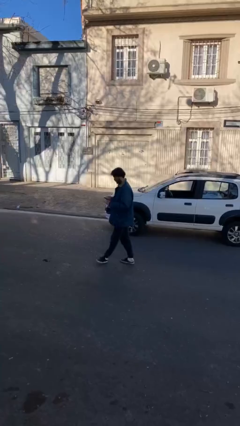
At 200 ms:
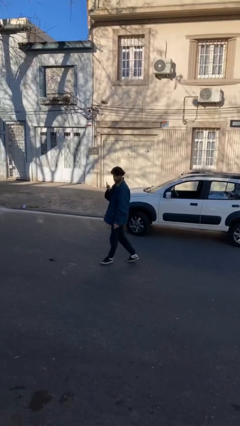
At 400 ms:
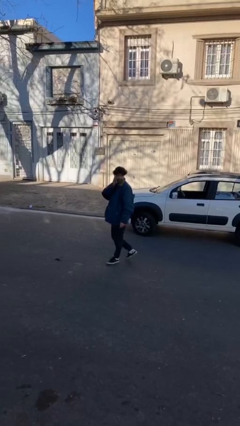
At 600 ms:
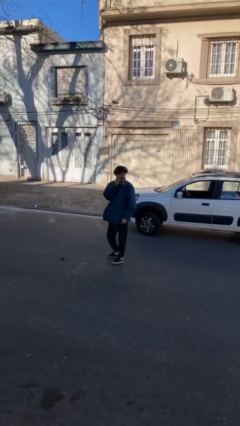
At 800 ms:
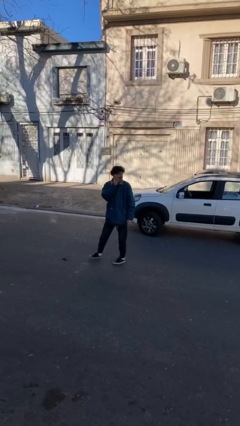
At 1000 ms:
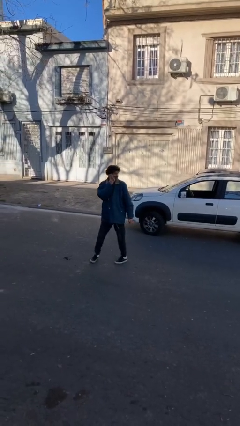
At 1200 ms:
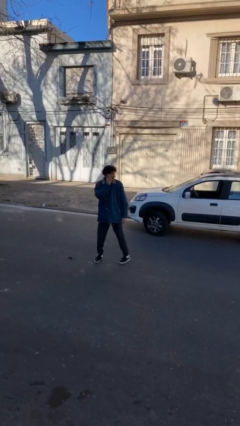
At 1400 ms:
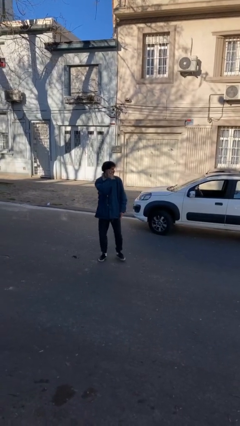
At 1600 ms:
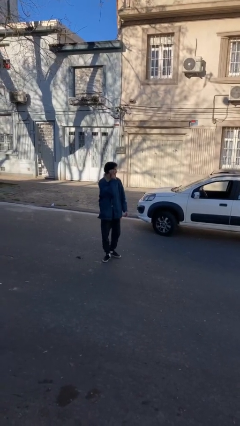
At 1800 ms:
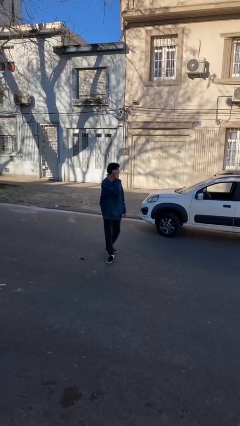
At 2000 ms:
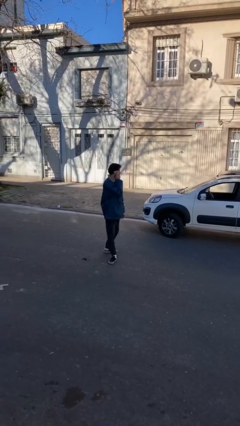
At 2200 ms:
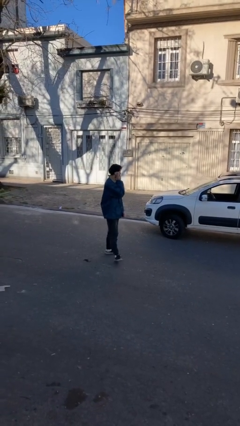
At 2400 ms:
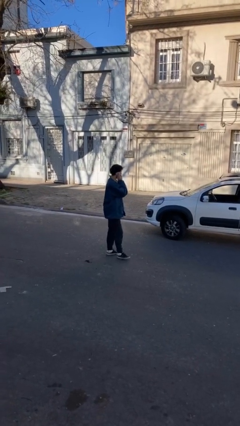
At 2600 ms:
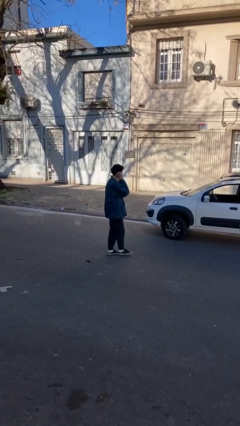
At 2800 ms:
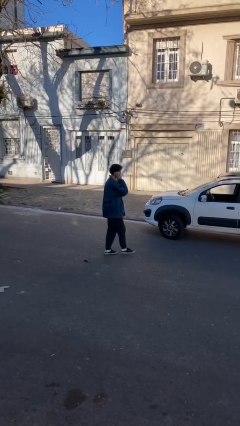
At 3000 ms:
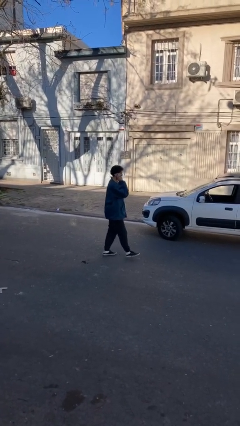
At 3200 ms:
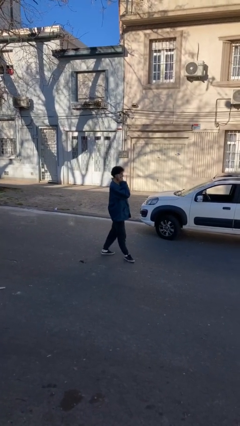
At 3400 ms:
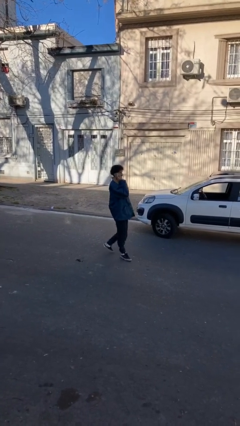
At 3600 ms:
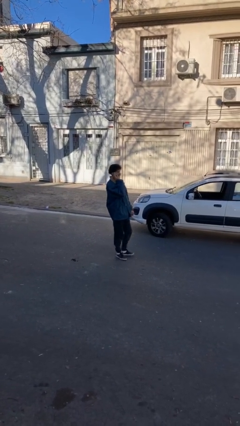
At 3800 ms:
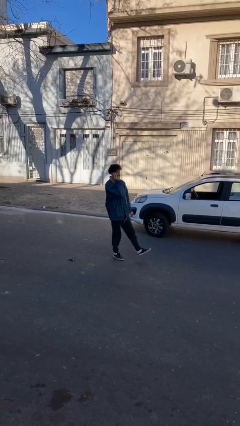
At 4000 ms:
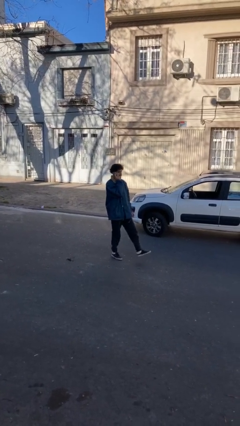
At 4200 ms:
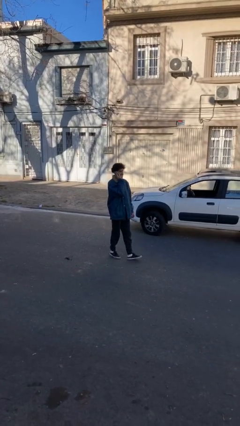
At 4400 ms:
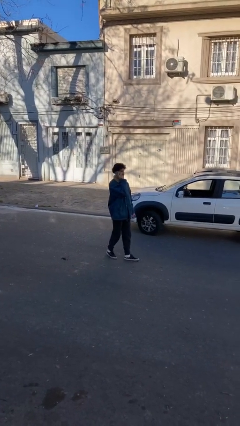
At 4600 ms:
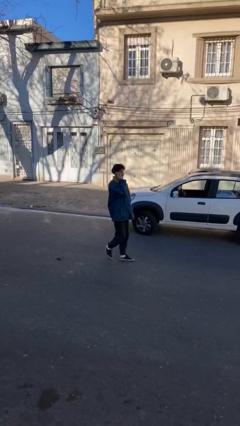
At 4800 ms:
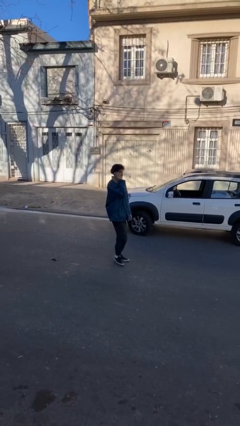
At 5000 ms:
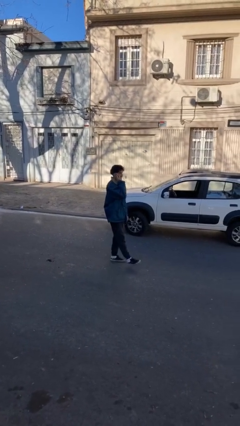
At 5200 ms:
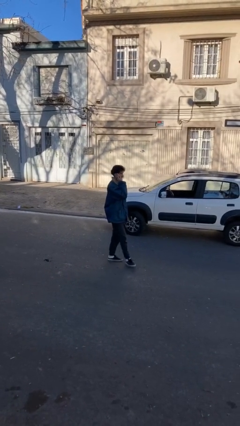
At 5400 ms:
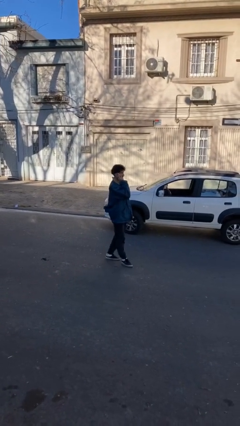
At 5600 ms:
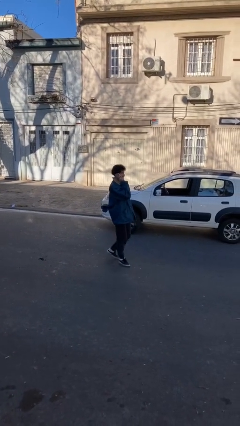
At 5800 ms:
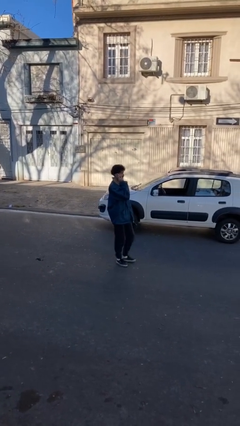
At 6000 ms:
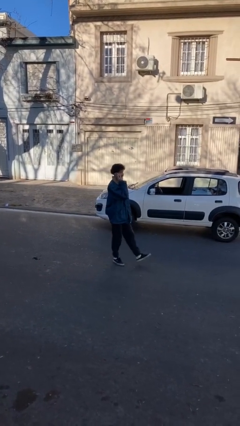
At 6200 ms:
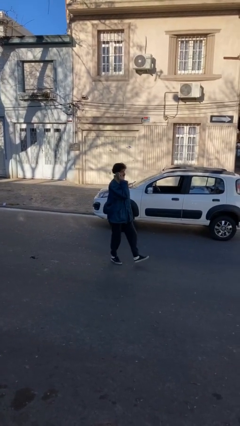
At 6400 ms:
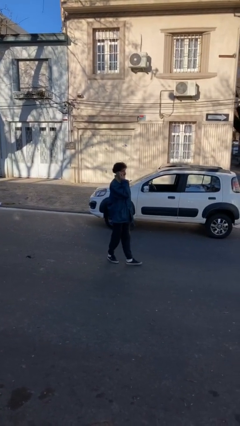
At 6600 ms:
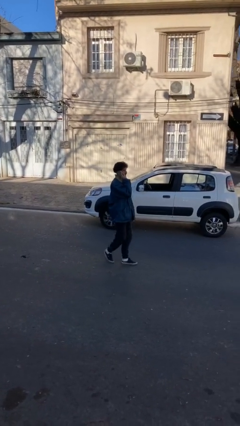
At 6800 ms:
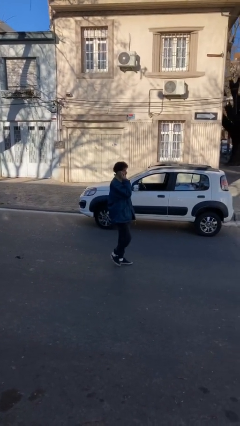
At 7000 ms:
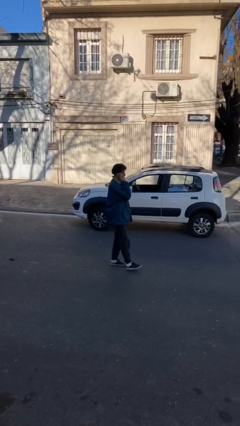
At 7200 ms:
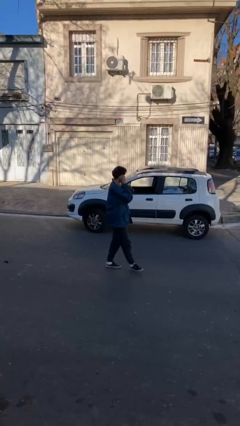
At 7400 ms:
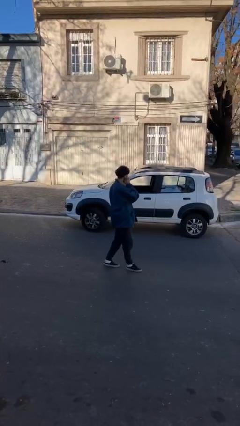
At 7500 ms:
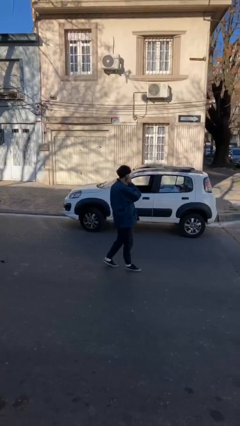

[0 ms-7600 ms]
person talks on phone

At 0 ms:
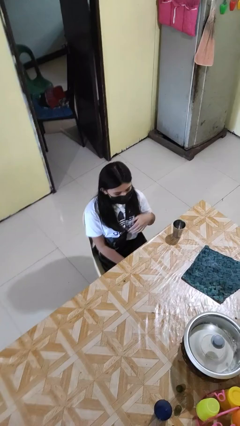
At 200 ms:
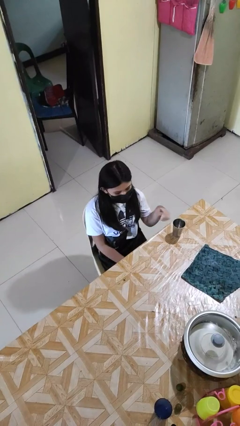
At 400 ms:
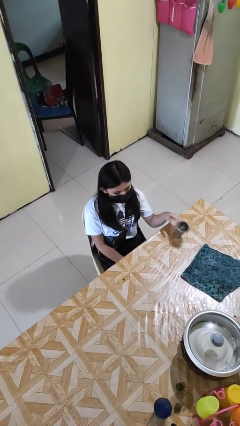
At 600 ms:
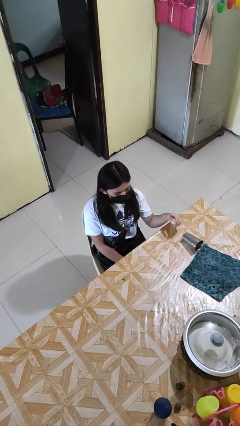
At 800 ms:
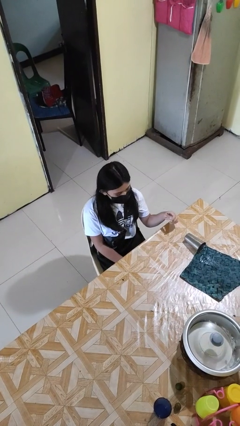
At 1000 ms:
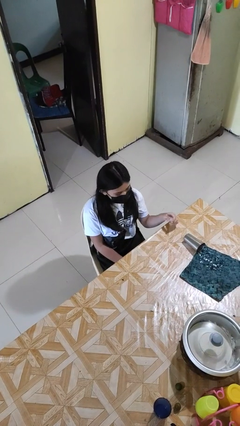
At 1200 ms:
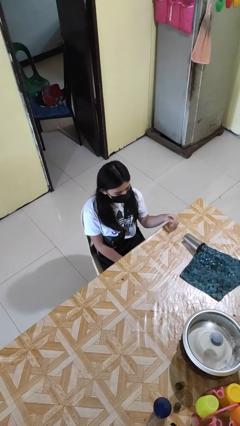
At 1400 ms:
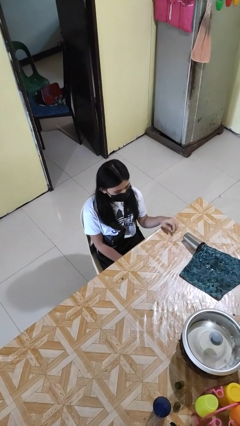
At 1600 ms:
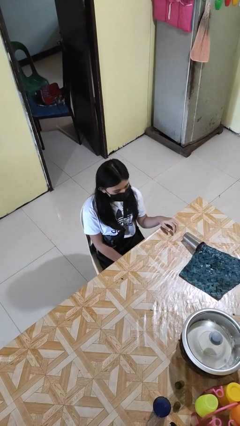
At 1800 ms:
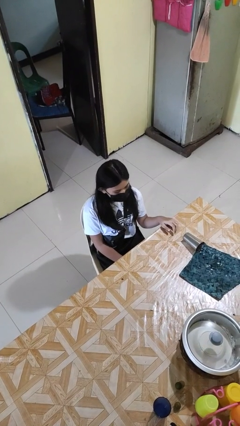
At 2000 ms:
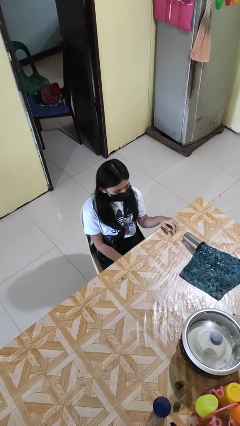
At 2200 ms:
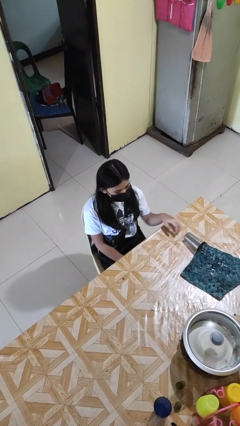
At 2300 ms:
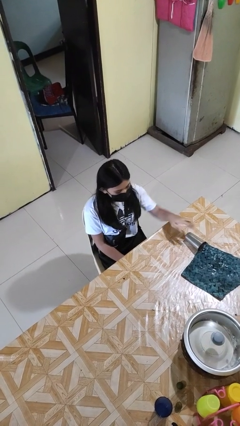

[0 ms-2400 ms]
person spills on table

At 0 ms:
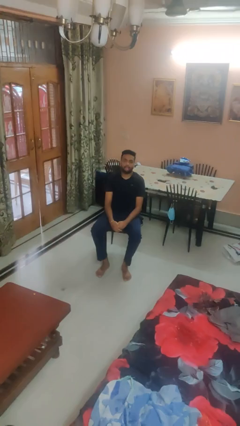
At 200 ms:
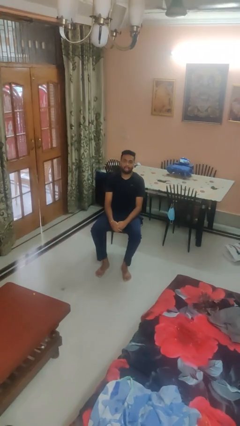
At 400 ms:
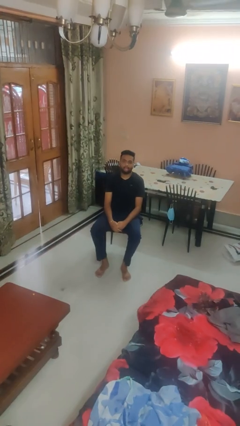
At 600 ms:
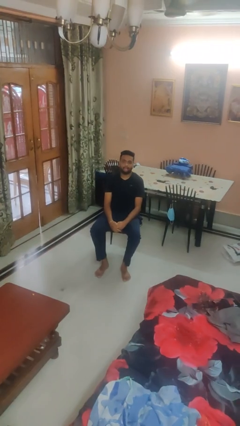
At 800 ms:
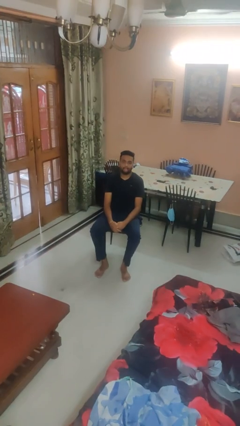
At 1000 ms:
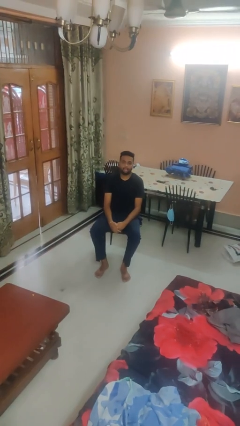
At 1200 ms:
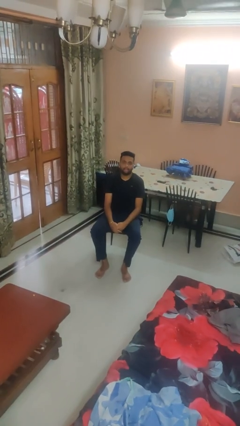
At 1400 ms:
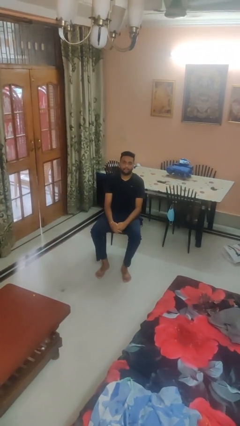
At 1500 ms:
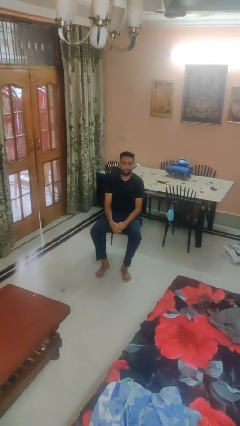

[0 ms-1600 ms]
person sticks out tongue

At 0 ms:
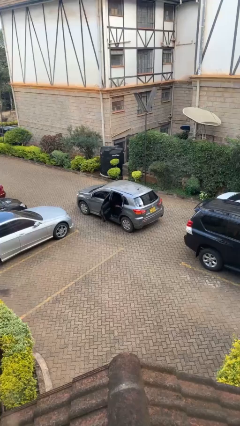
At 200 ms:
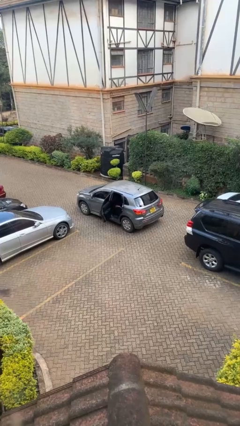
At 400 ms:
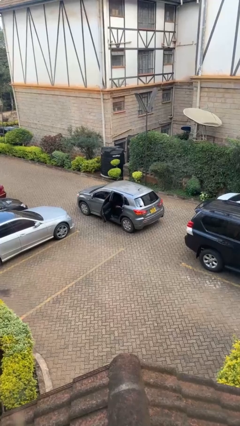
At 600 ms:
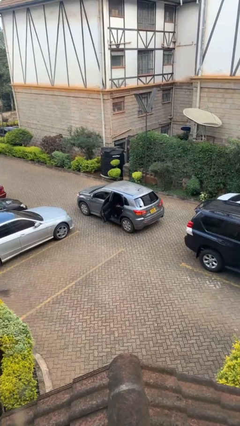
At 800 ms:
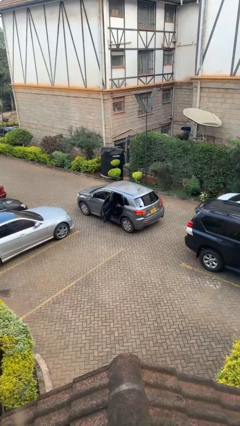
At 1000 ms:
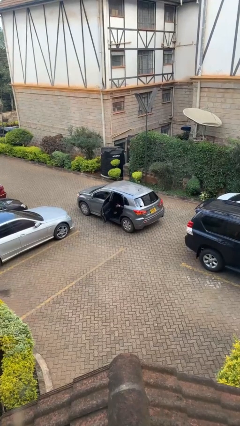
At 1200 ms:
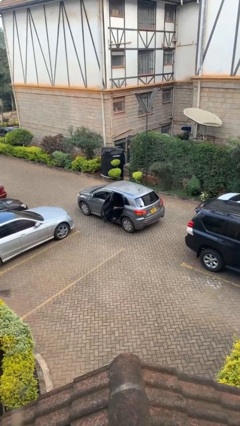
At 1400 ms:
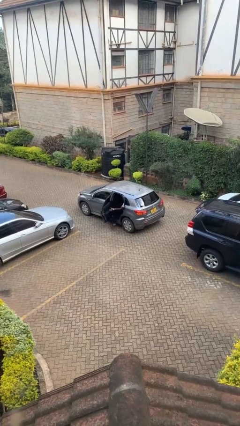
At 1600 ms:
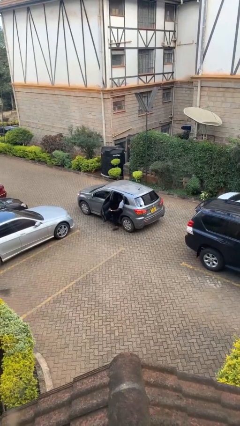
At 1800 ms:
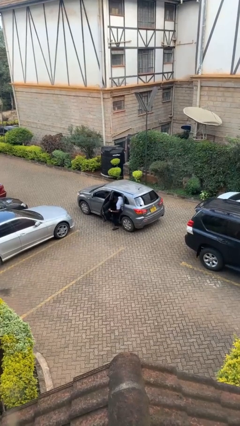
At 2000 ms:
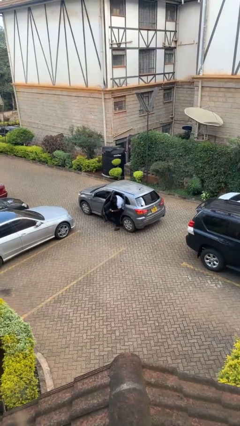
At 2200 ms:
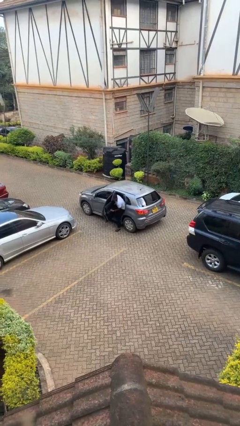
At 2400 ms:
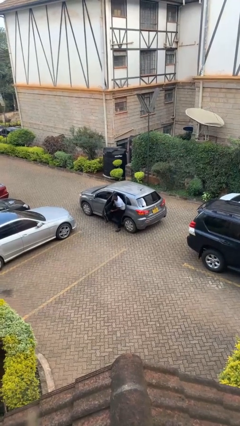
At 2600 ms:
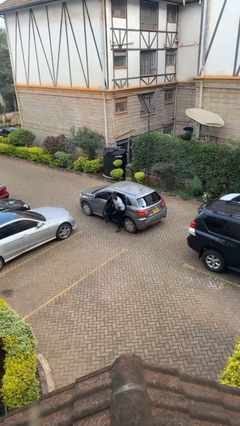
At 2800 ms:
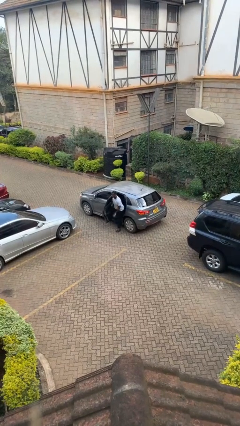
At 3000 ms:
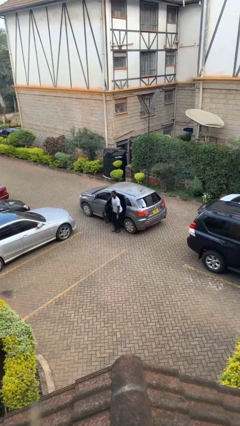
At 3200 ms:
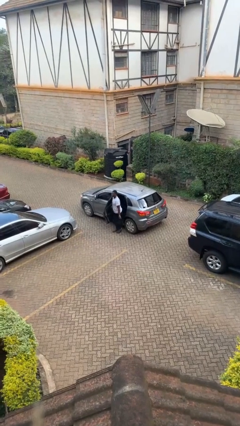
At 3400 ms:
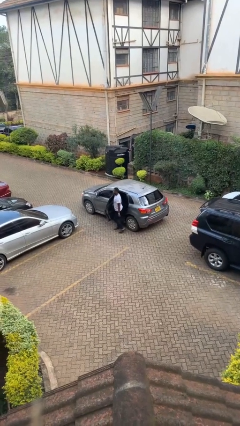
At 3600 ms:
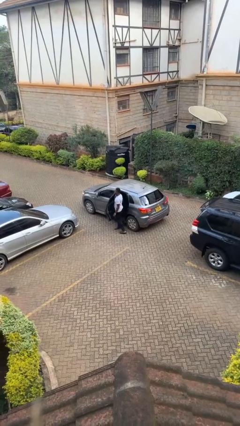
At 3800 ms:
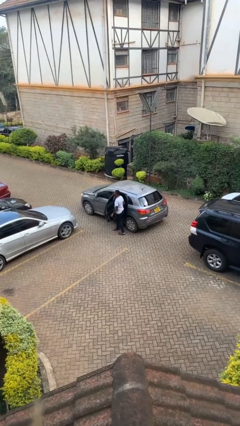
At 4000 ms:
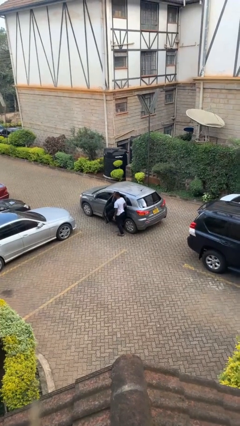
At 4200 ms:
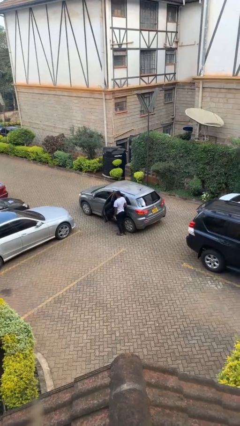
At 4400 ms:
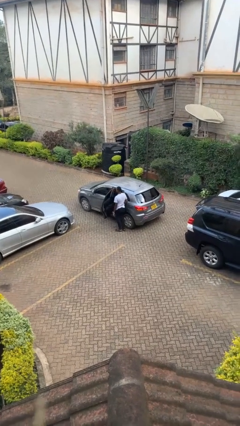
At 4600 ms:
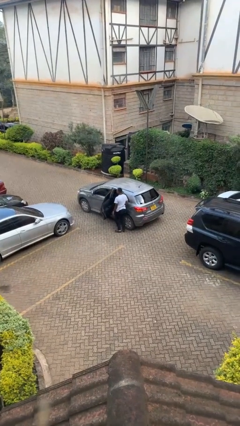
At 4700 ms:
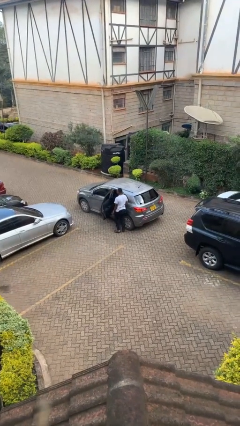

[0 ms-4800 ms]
person exits car

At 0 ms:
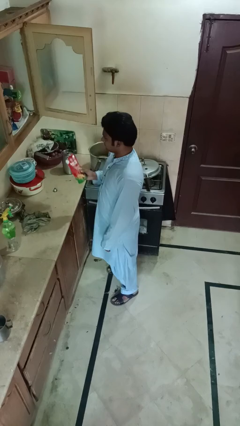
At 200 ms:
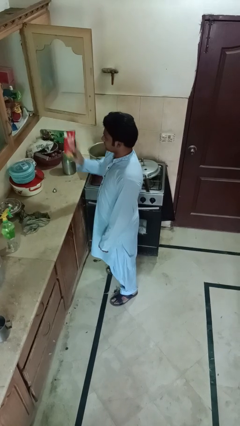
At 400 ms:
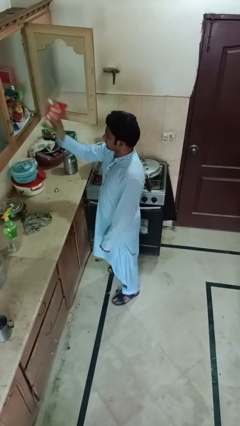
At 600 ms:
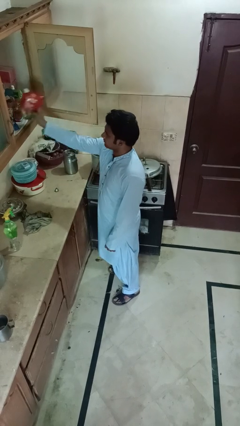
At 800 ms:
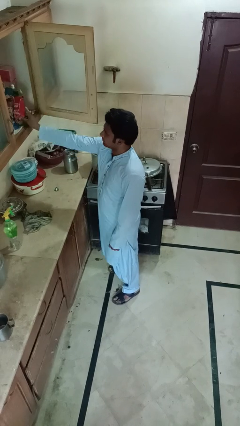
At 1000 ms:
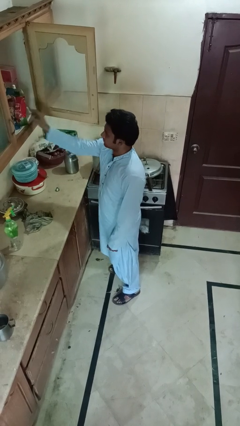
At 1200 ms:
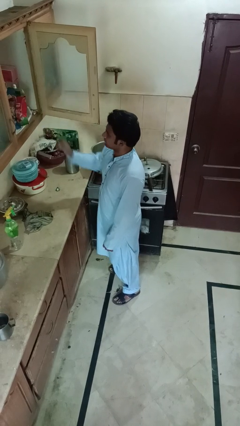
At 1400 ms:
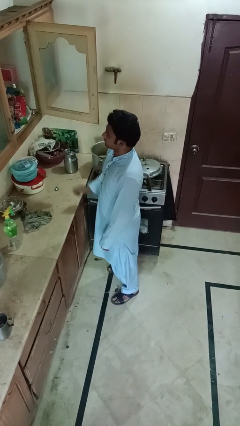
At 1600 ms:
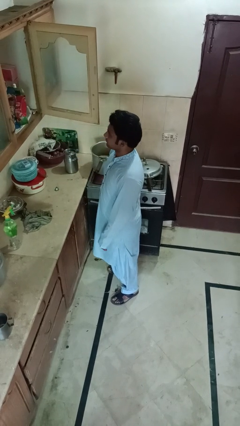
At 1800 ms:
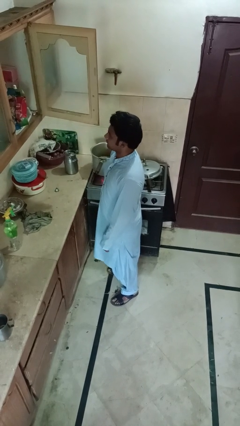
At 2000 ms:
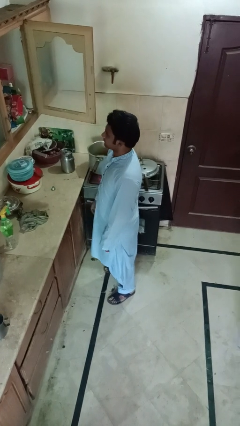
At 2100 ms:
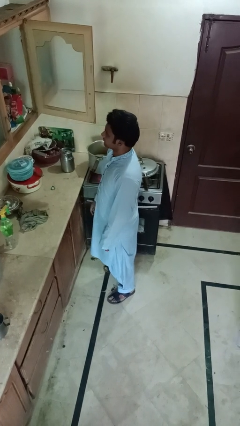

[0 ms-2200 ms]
person puts down object into cabinet
